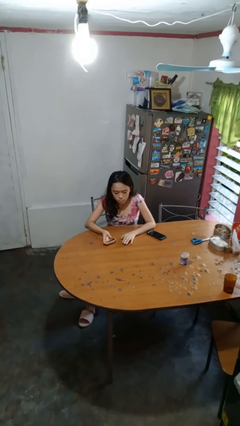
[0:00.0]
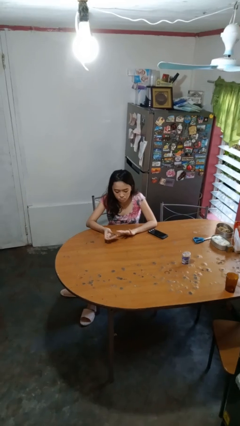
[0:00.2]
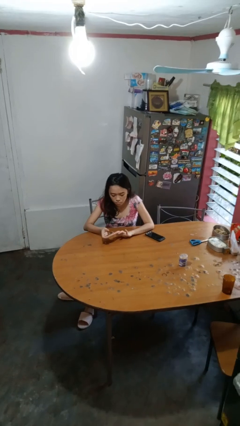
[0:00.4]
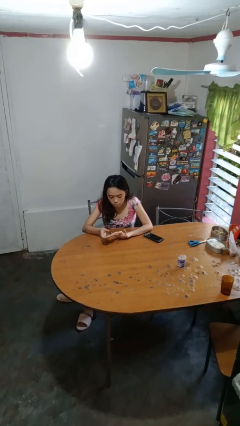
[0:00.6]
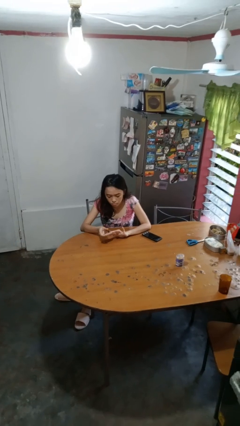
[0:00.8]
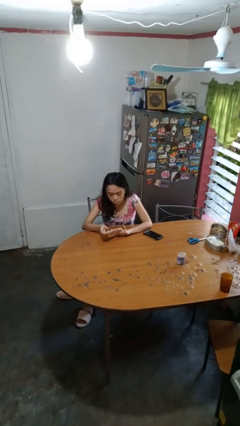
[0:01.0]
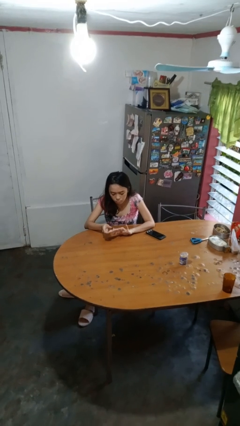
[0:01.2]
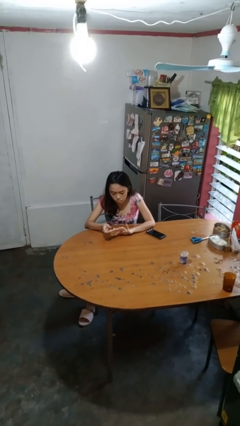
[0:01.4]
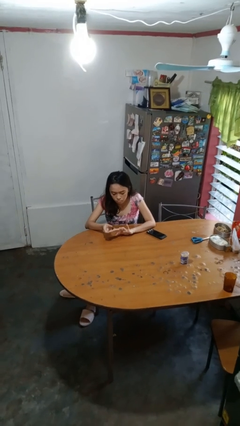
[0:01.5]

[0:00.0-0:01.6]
person clips fingernails

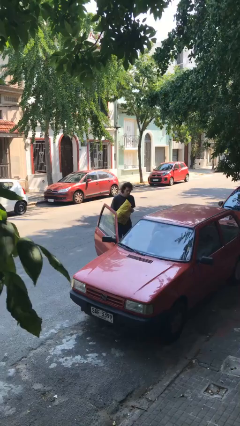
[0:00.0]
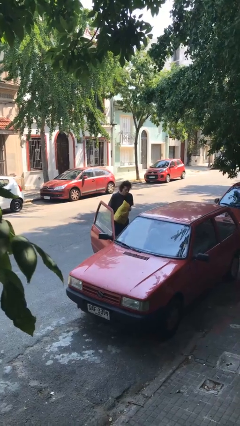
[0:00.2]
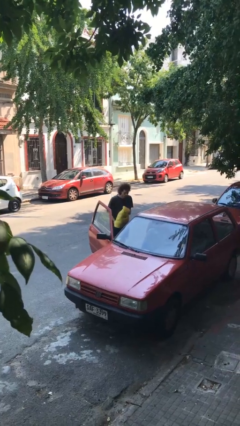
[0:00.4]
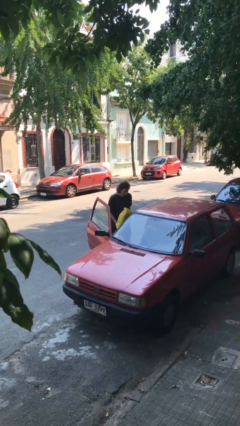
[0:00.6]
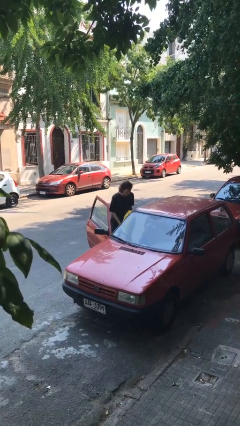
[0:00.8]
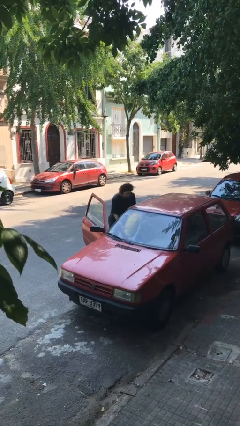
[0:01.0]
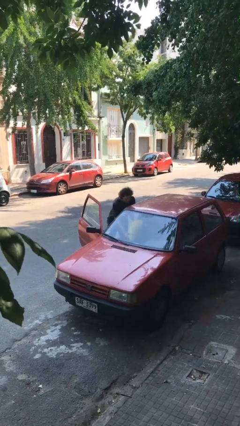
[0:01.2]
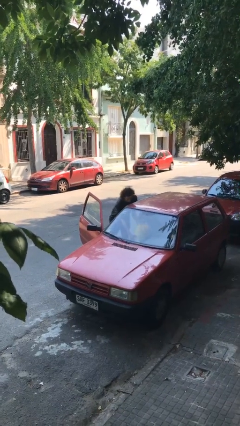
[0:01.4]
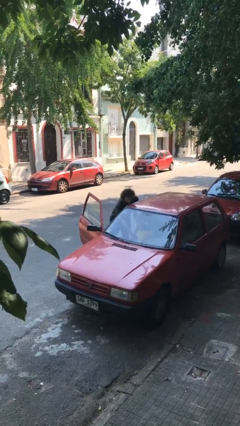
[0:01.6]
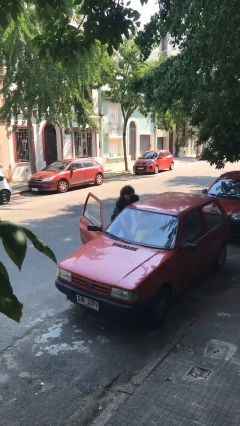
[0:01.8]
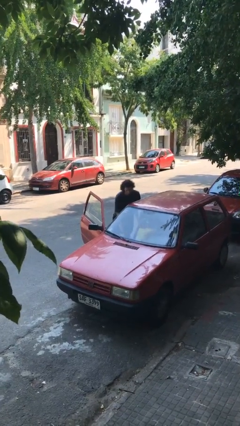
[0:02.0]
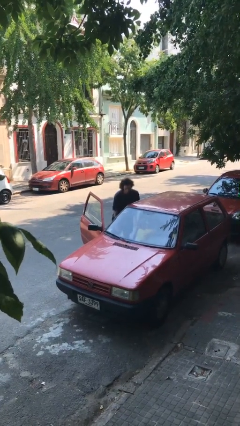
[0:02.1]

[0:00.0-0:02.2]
person loads car

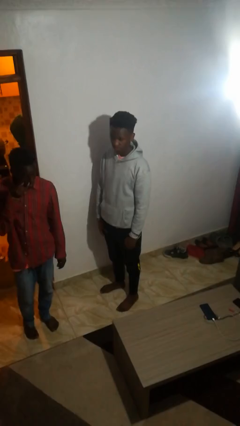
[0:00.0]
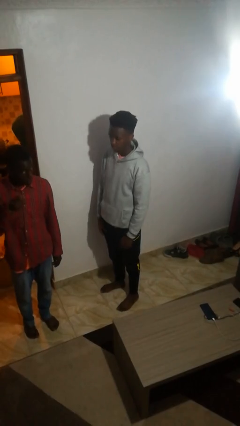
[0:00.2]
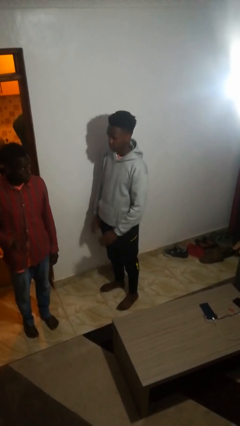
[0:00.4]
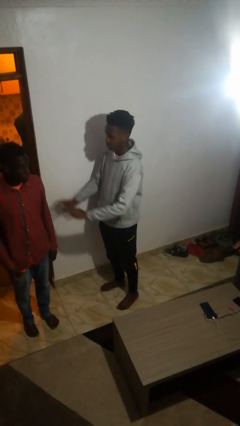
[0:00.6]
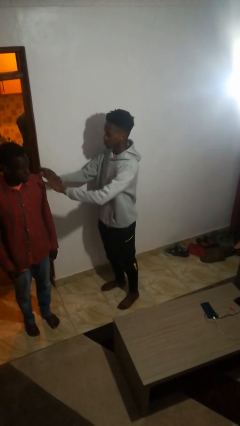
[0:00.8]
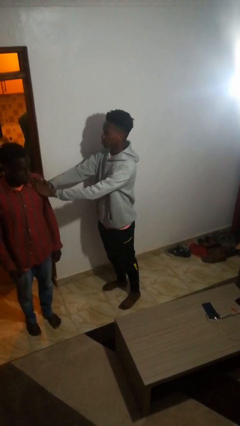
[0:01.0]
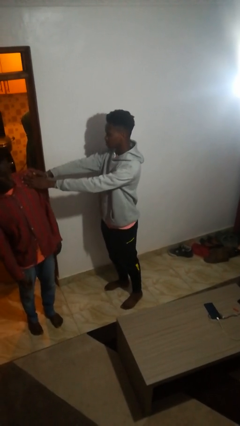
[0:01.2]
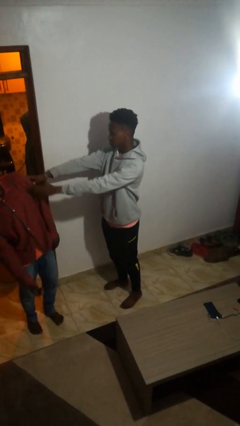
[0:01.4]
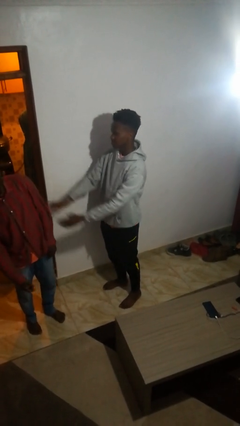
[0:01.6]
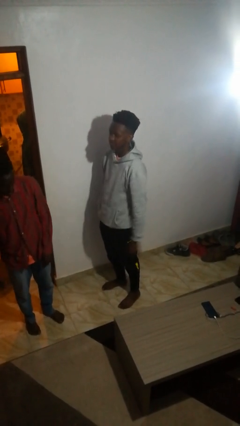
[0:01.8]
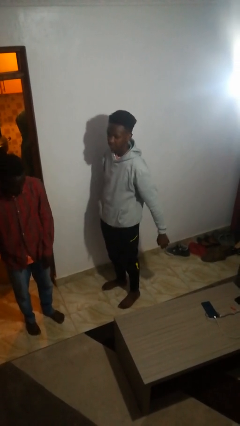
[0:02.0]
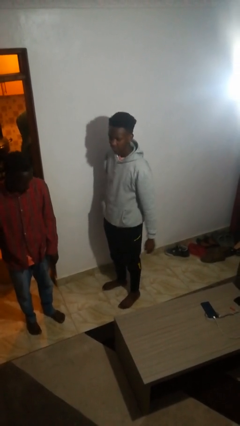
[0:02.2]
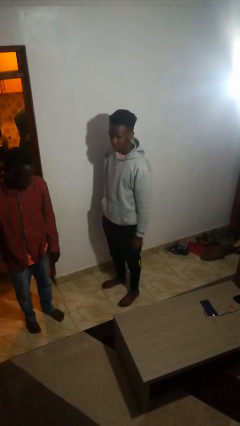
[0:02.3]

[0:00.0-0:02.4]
person shoves person

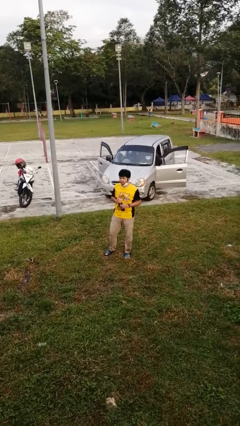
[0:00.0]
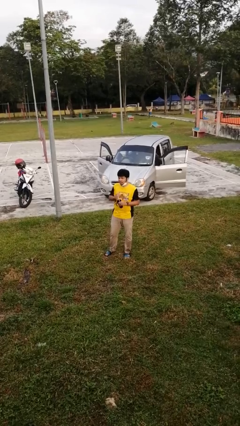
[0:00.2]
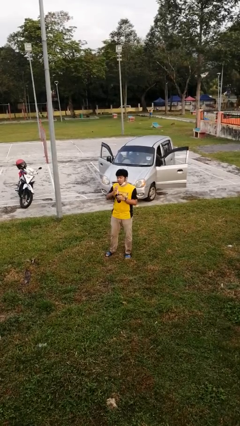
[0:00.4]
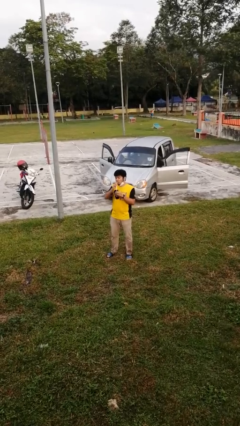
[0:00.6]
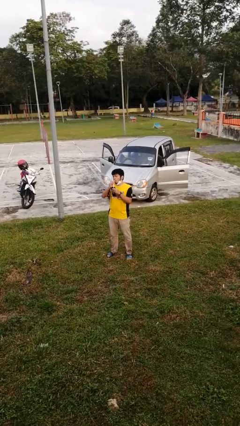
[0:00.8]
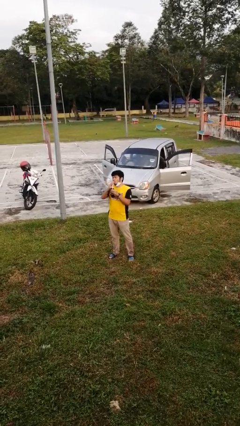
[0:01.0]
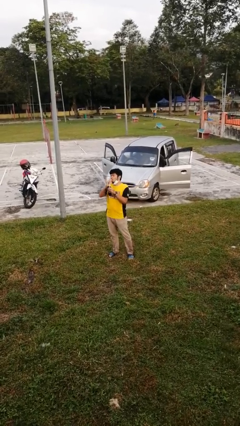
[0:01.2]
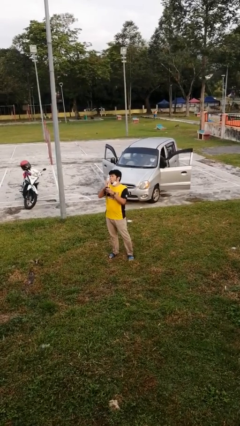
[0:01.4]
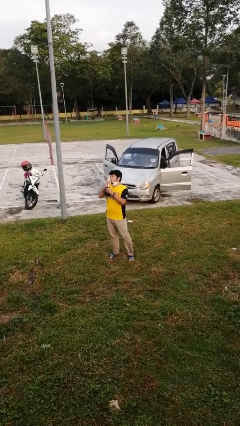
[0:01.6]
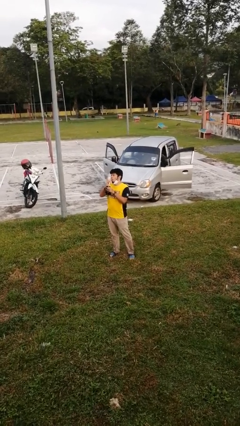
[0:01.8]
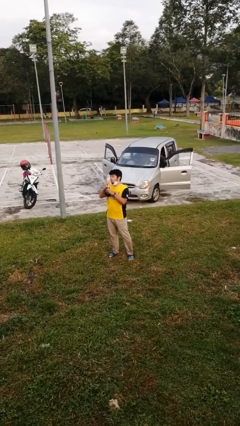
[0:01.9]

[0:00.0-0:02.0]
person drinks from straw

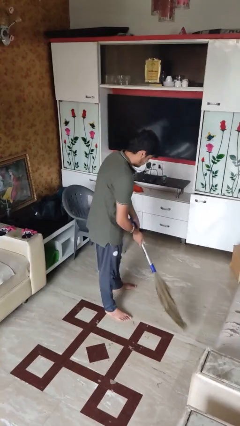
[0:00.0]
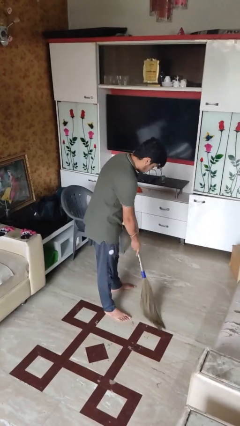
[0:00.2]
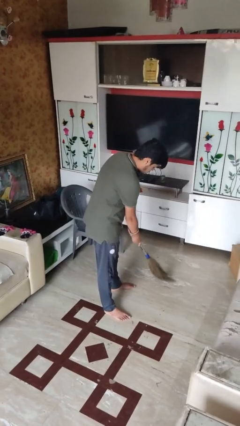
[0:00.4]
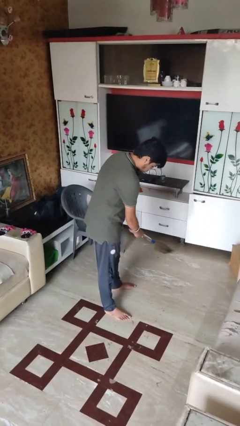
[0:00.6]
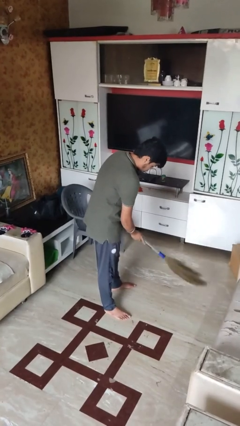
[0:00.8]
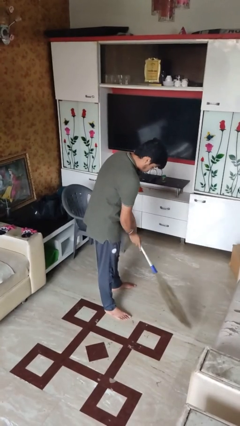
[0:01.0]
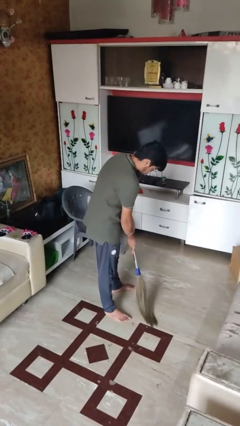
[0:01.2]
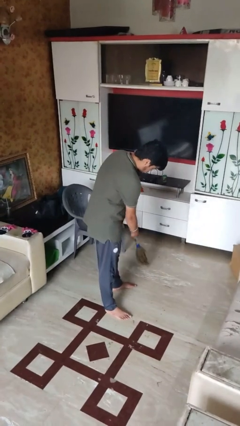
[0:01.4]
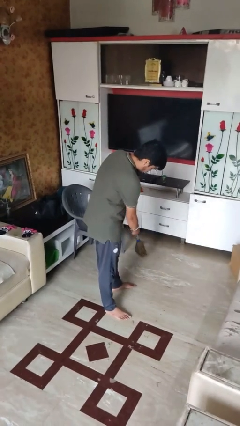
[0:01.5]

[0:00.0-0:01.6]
person sweeps floor

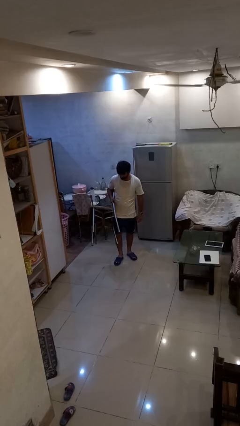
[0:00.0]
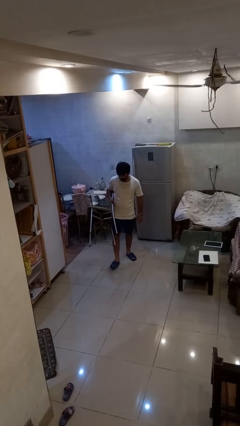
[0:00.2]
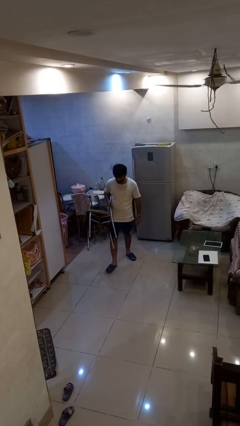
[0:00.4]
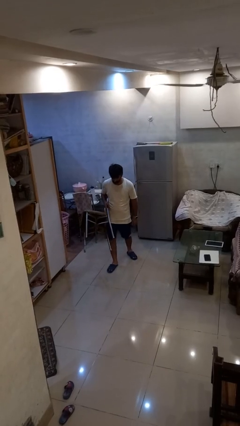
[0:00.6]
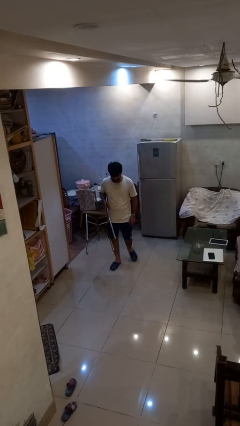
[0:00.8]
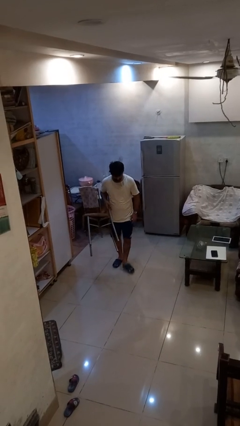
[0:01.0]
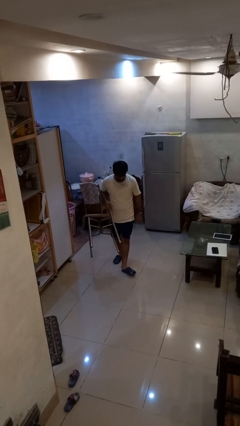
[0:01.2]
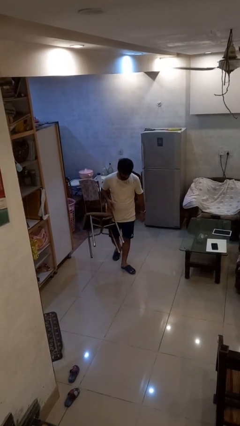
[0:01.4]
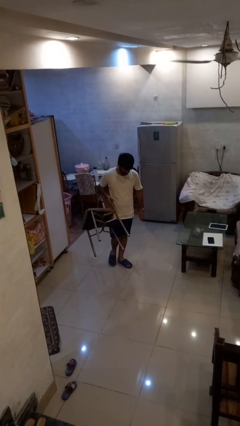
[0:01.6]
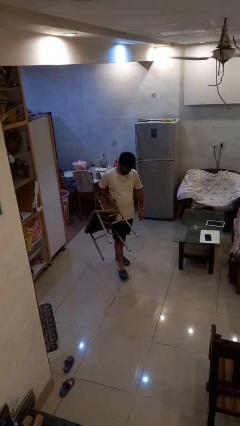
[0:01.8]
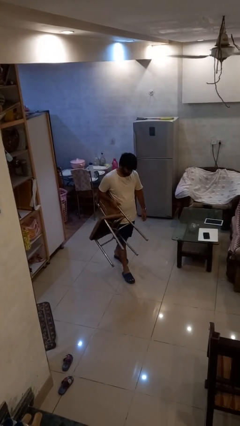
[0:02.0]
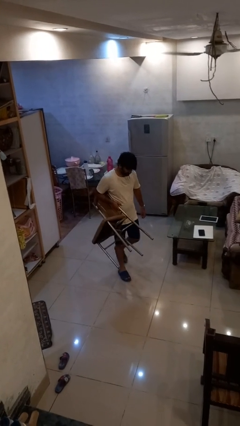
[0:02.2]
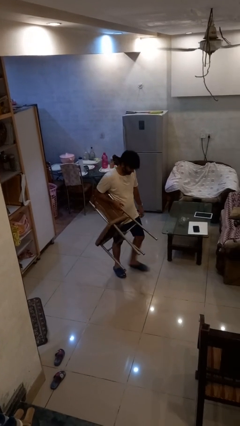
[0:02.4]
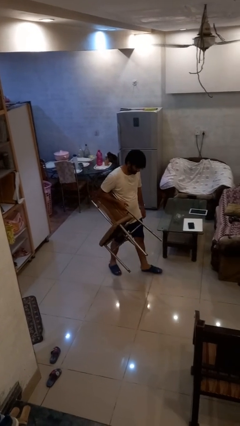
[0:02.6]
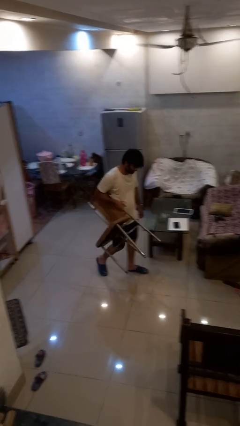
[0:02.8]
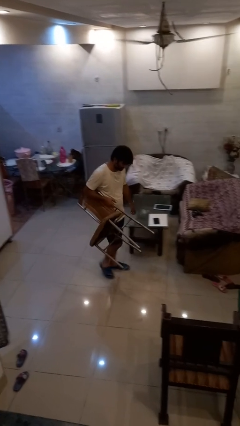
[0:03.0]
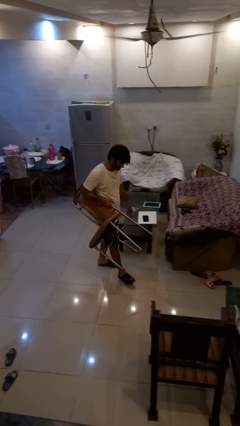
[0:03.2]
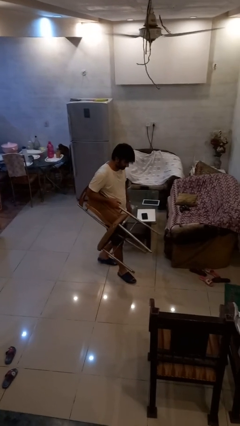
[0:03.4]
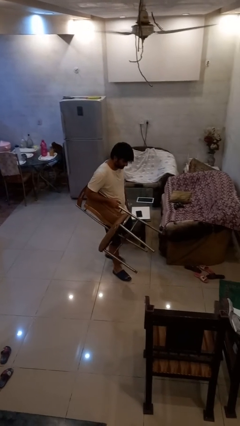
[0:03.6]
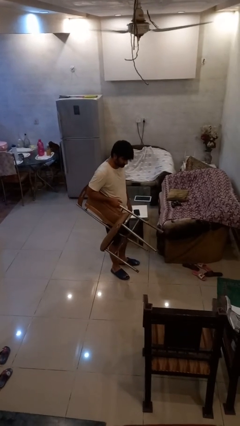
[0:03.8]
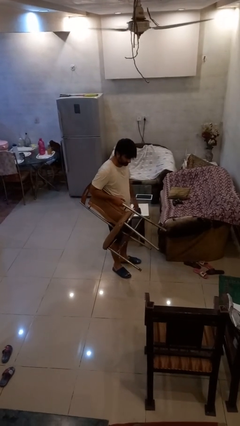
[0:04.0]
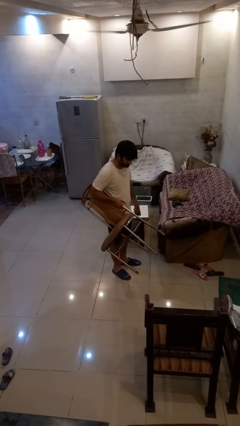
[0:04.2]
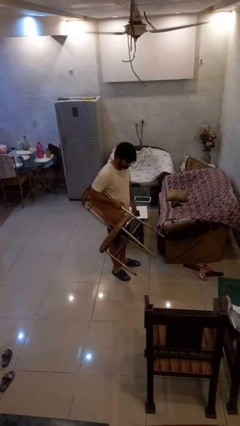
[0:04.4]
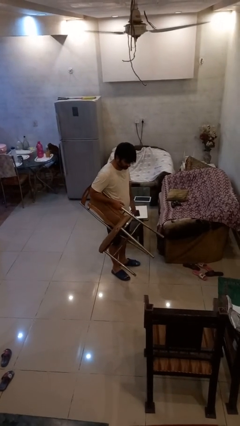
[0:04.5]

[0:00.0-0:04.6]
person carries furniture

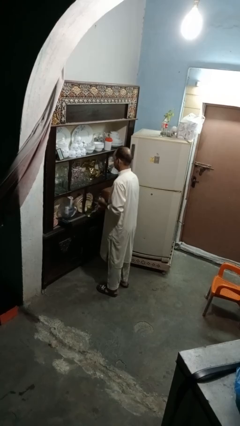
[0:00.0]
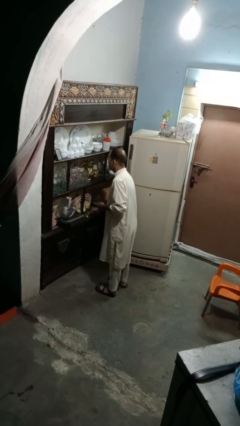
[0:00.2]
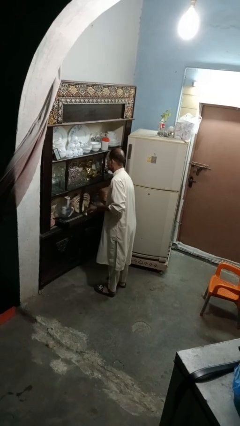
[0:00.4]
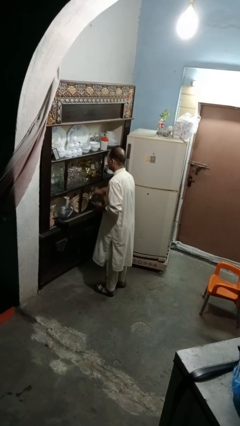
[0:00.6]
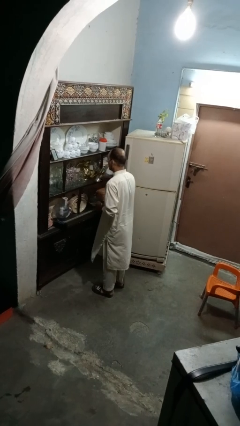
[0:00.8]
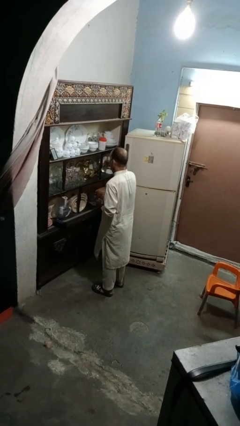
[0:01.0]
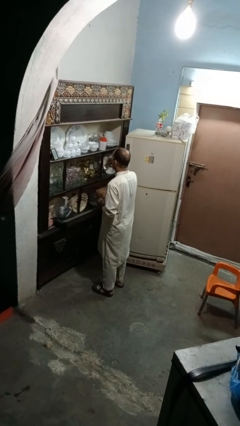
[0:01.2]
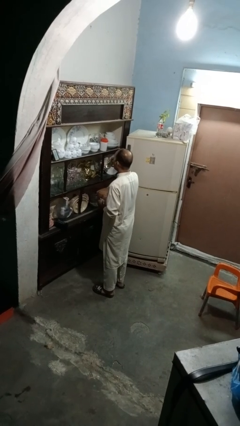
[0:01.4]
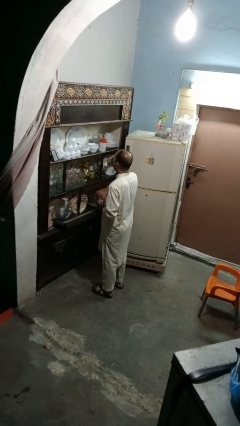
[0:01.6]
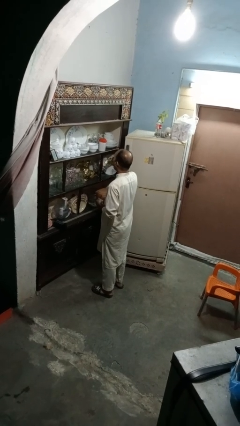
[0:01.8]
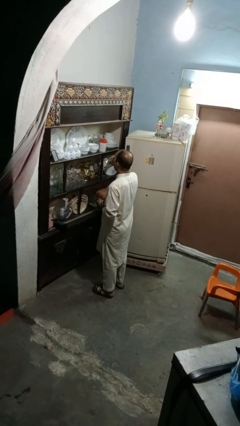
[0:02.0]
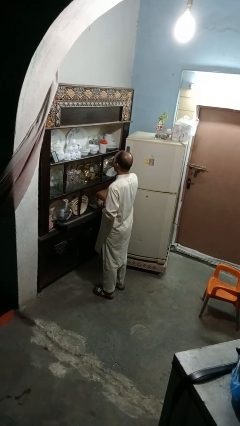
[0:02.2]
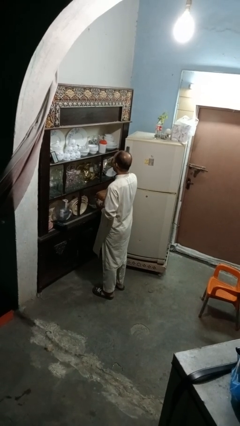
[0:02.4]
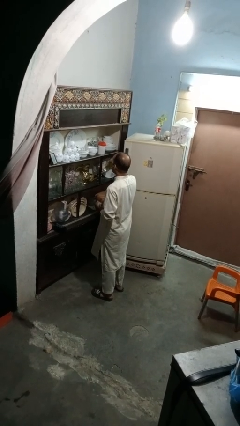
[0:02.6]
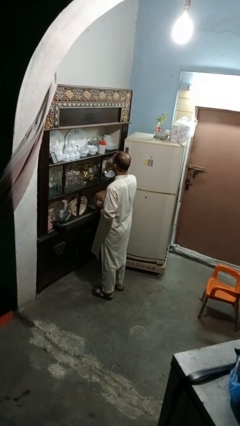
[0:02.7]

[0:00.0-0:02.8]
person drinks from cup
